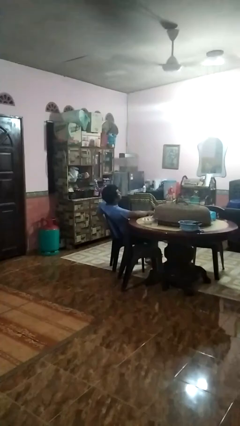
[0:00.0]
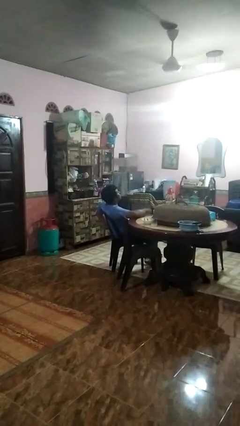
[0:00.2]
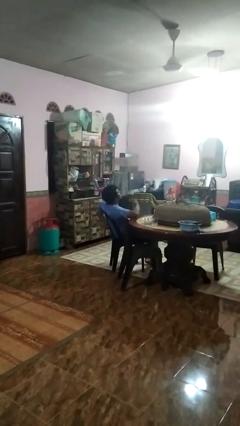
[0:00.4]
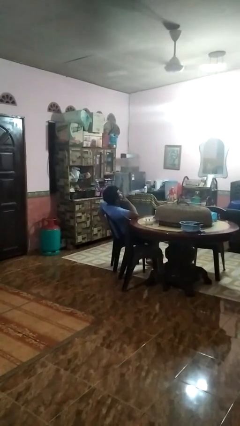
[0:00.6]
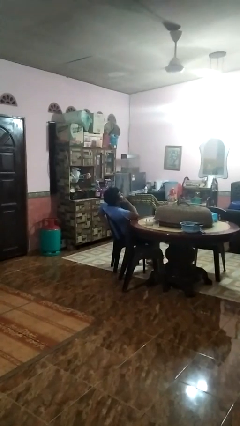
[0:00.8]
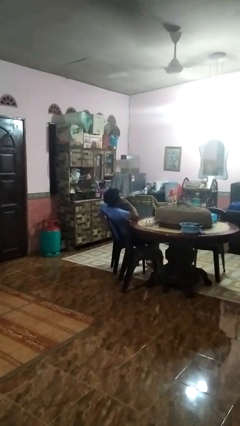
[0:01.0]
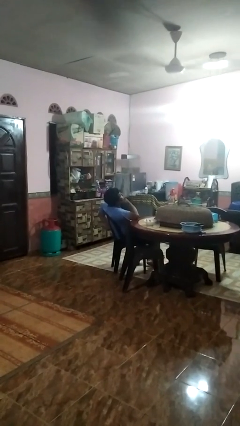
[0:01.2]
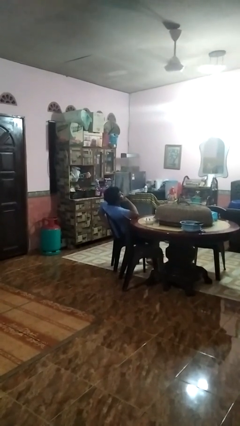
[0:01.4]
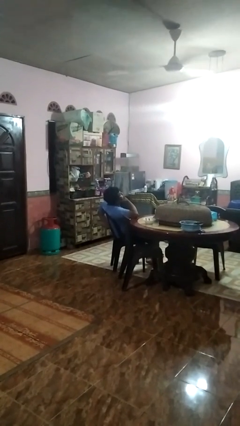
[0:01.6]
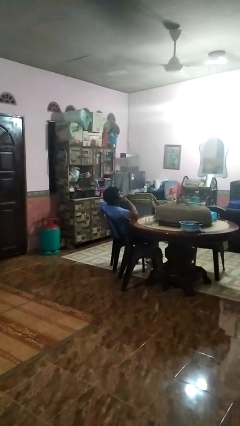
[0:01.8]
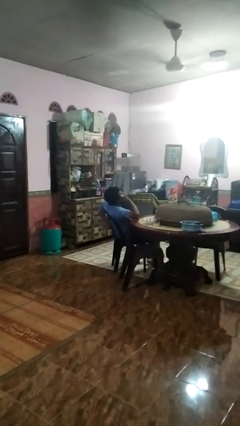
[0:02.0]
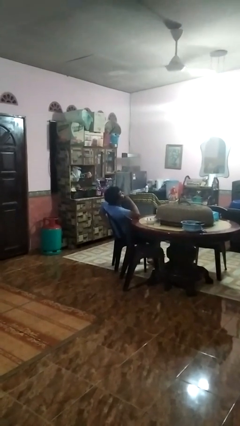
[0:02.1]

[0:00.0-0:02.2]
person strokes chin

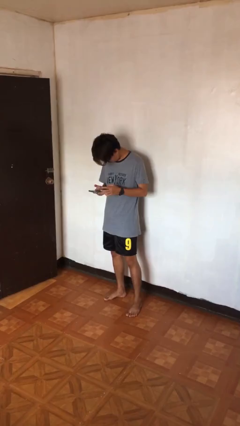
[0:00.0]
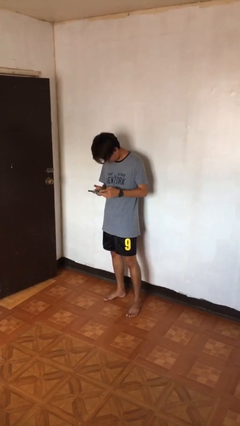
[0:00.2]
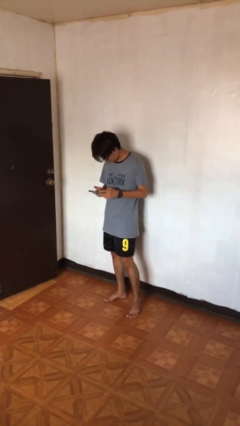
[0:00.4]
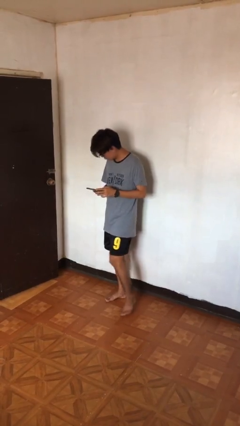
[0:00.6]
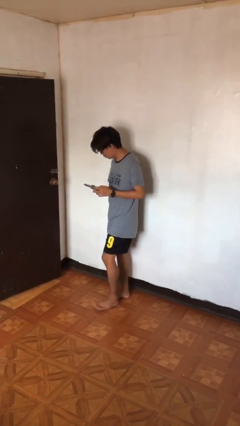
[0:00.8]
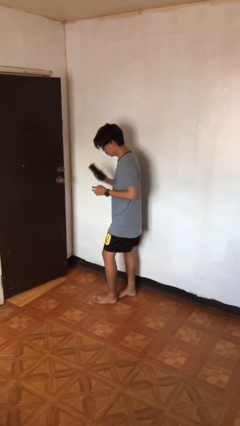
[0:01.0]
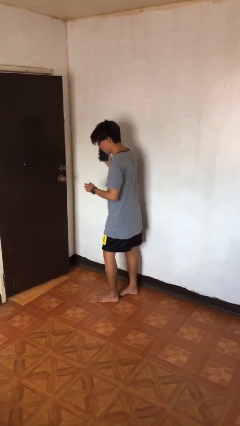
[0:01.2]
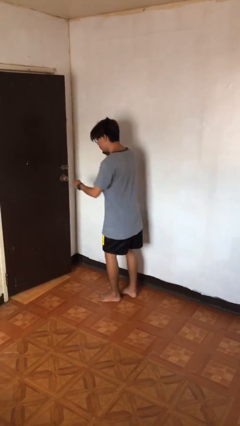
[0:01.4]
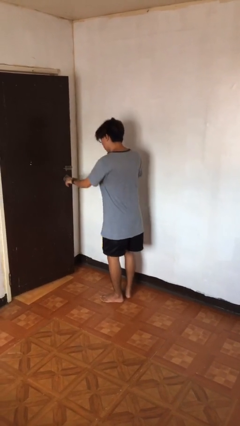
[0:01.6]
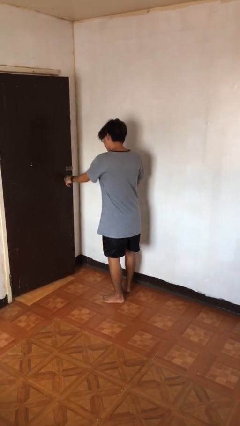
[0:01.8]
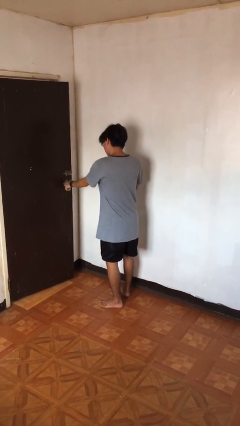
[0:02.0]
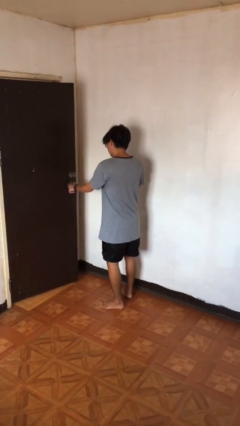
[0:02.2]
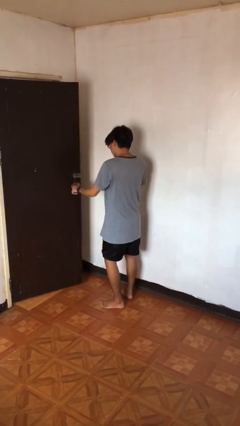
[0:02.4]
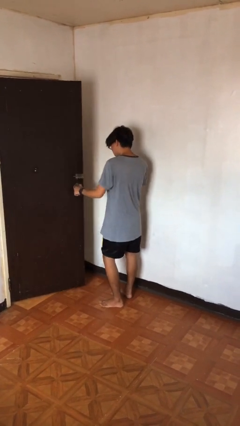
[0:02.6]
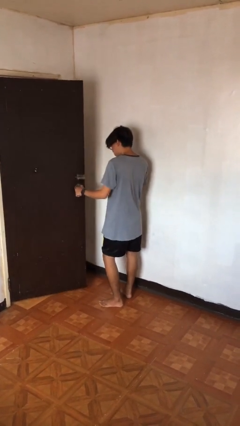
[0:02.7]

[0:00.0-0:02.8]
person opens facility door

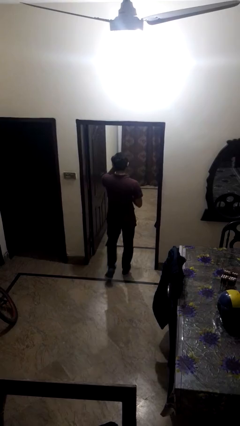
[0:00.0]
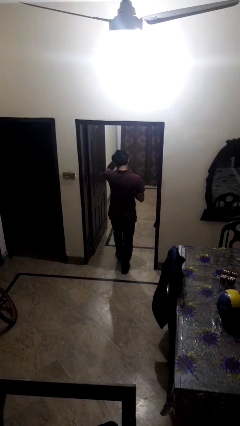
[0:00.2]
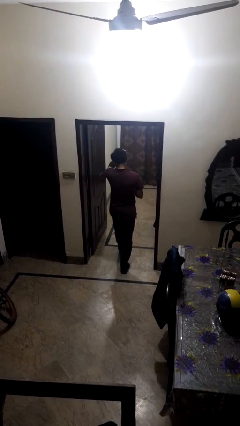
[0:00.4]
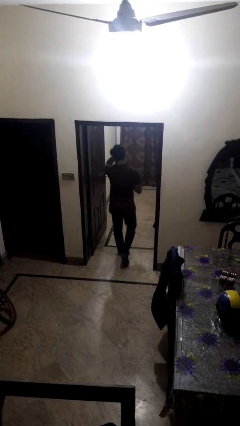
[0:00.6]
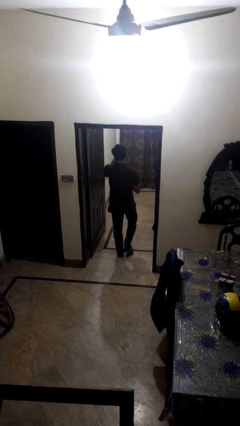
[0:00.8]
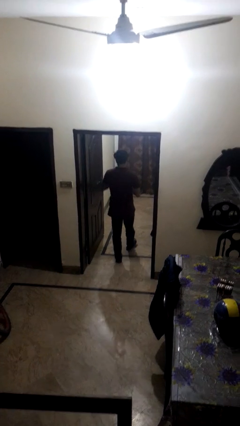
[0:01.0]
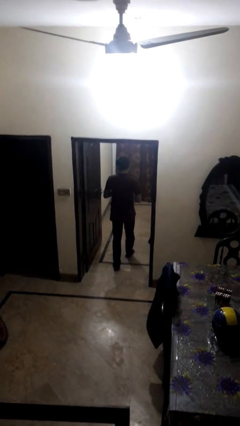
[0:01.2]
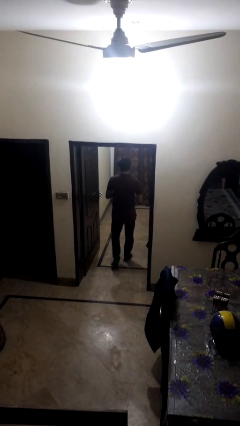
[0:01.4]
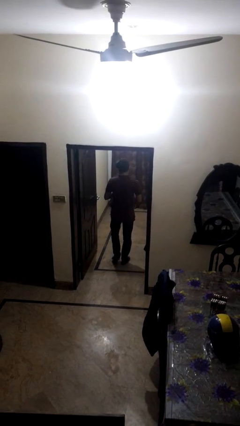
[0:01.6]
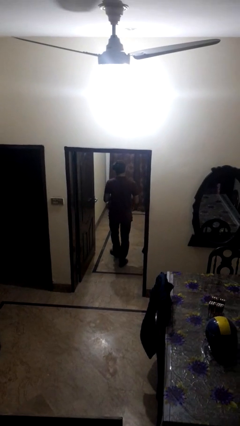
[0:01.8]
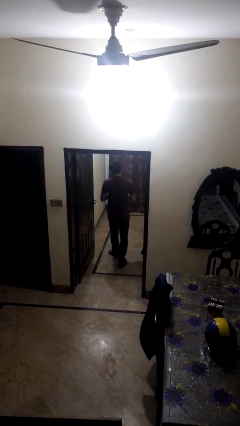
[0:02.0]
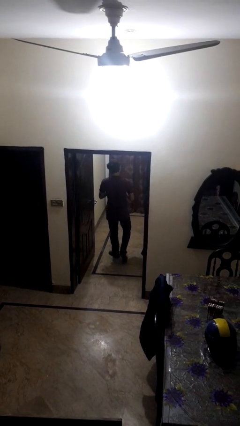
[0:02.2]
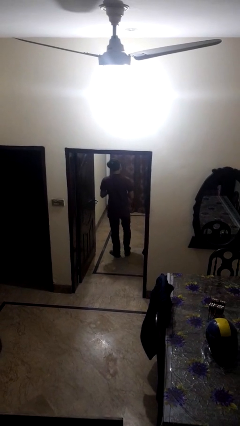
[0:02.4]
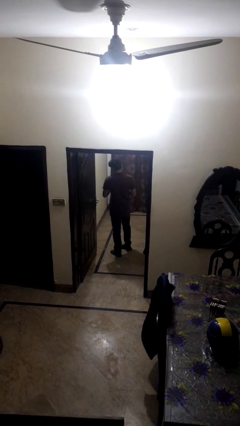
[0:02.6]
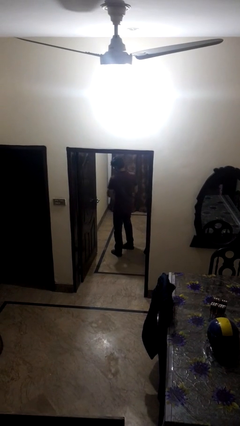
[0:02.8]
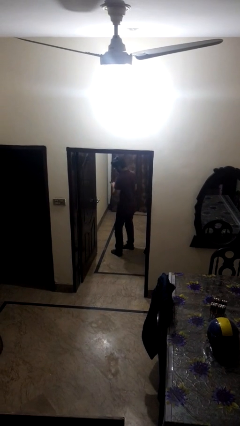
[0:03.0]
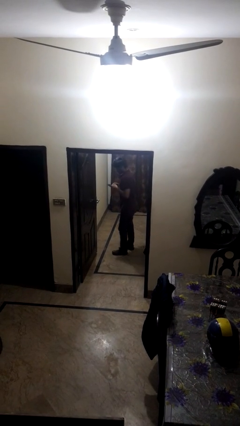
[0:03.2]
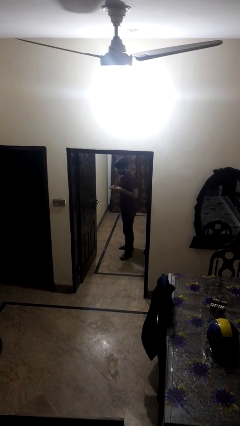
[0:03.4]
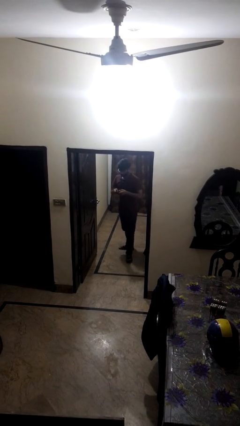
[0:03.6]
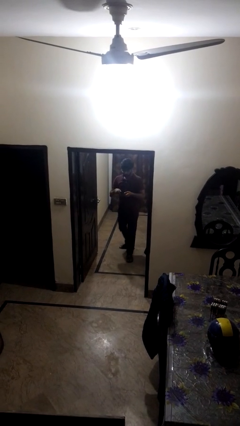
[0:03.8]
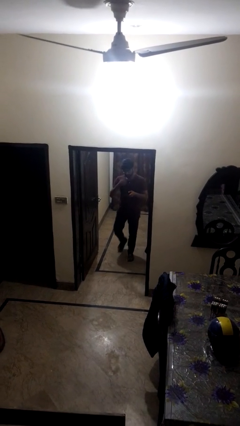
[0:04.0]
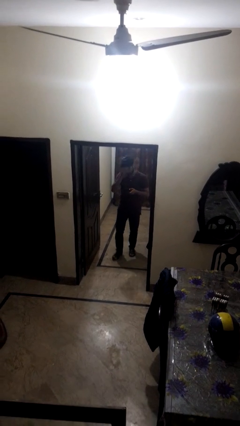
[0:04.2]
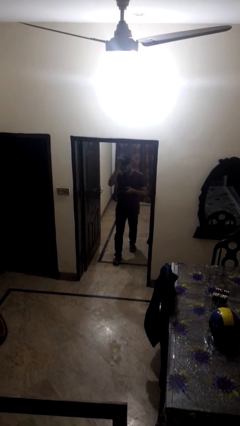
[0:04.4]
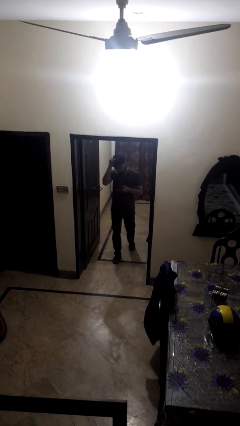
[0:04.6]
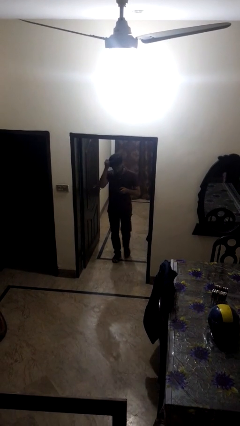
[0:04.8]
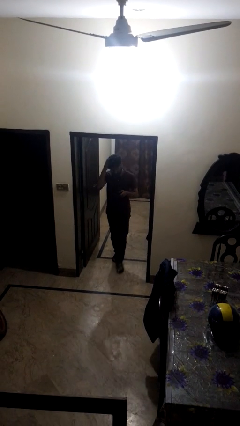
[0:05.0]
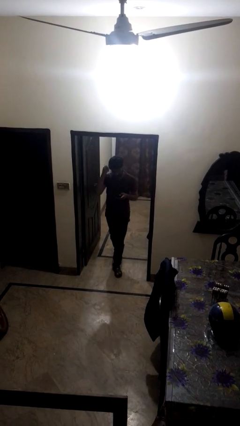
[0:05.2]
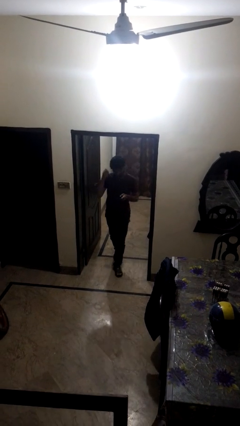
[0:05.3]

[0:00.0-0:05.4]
person exits scene through structure

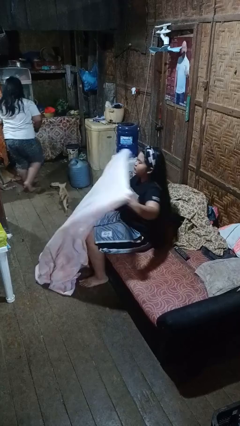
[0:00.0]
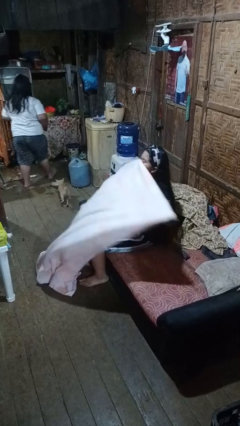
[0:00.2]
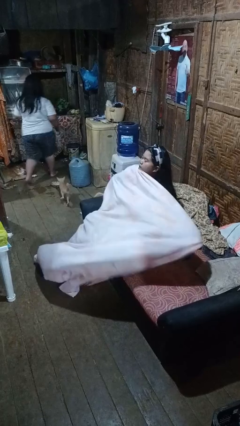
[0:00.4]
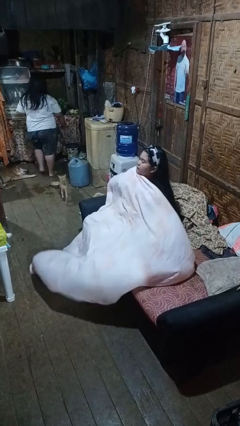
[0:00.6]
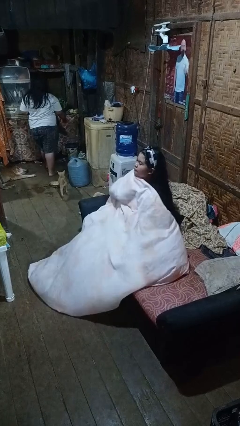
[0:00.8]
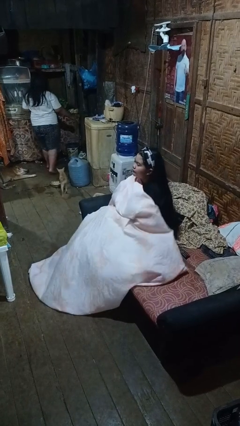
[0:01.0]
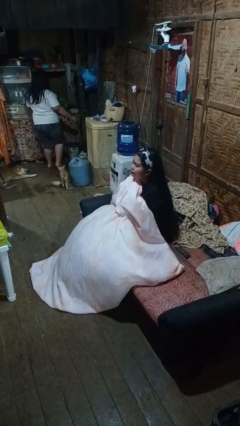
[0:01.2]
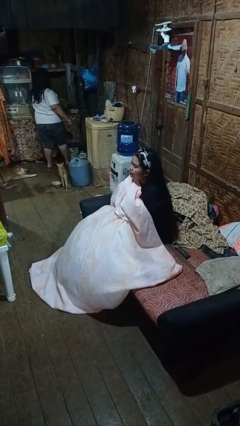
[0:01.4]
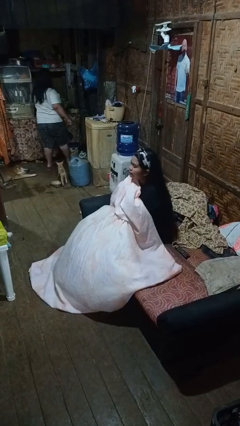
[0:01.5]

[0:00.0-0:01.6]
person covers with blanket

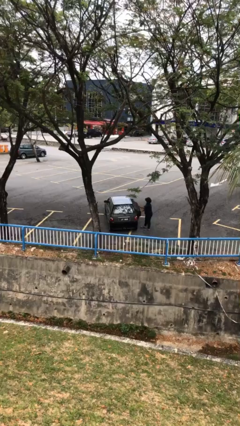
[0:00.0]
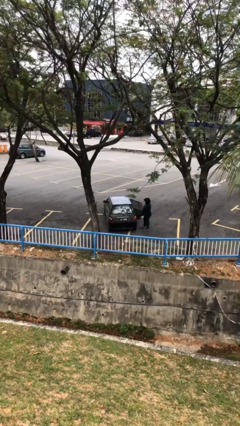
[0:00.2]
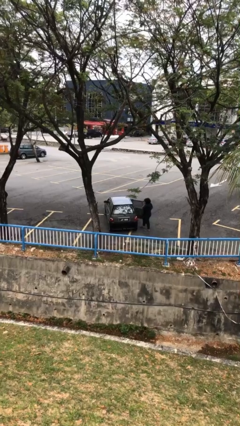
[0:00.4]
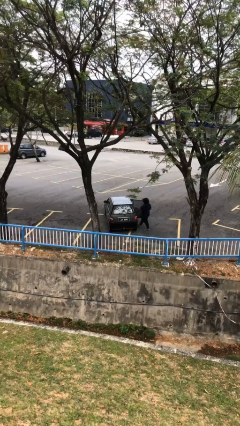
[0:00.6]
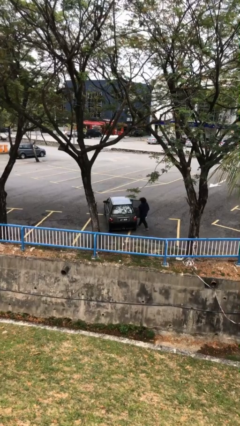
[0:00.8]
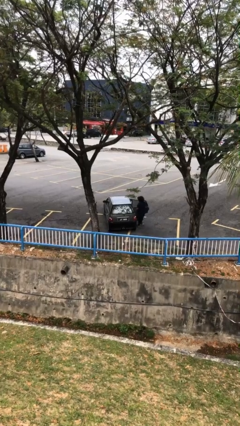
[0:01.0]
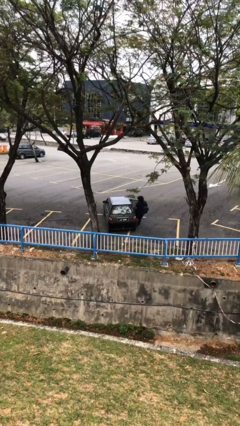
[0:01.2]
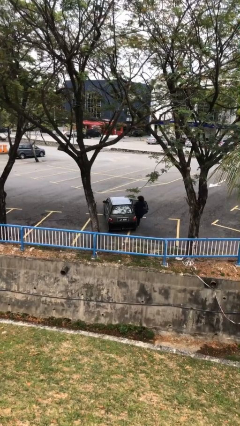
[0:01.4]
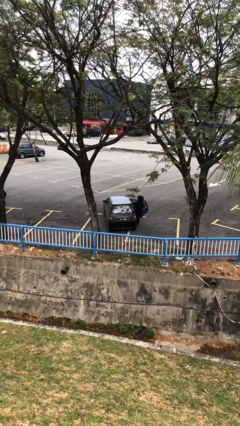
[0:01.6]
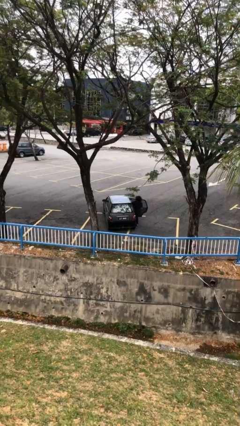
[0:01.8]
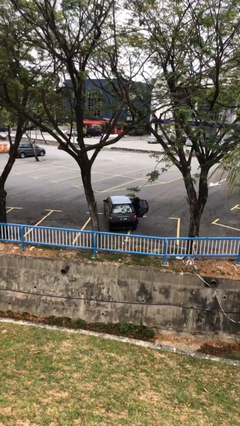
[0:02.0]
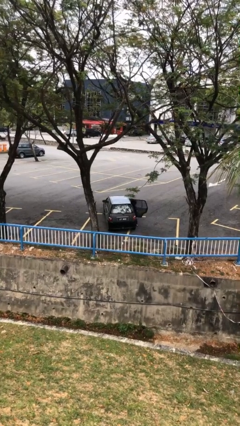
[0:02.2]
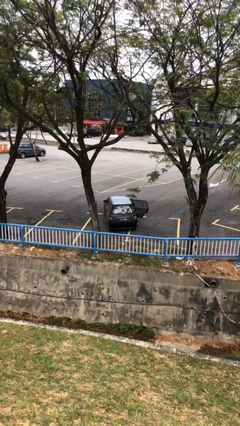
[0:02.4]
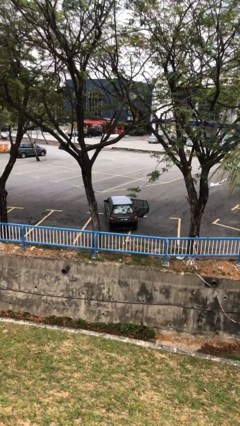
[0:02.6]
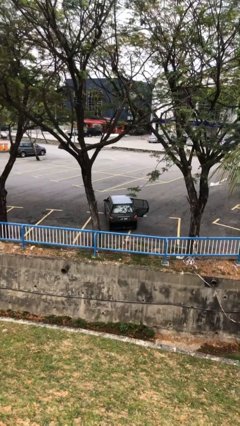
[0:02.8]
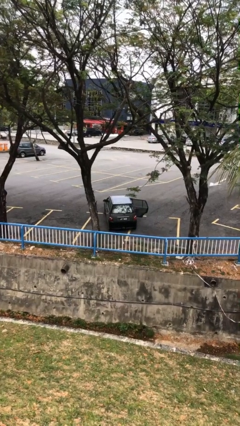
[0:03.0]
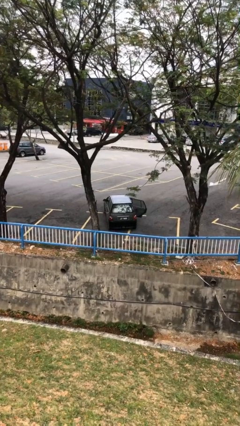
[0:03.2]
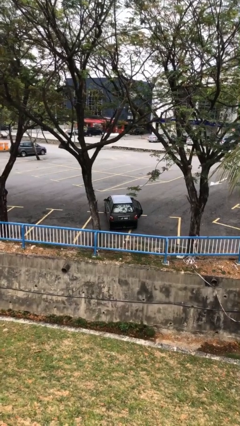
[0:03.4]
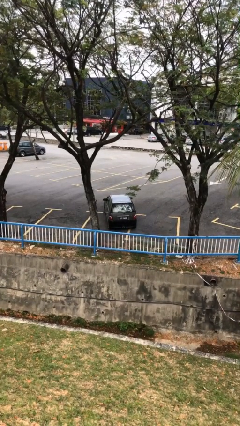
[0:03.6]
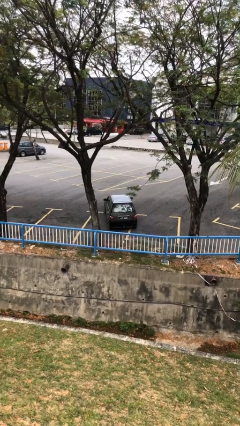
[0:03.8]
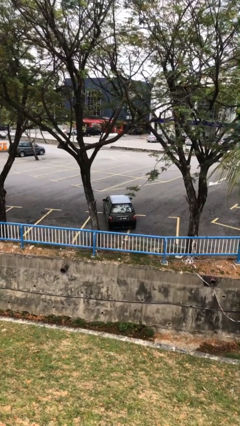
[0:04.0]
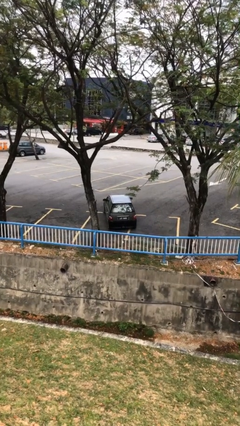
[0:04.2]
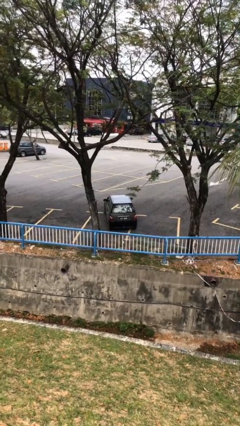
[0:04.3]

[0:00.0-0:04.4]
car picks up person

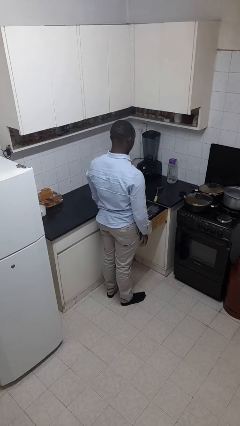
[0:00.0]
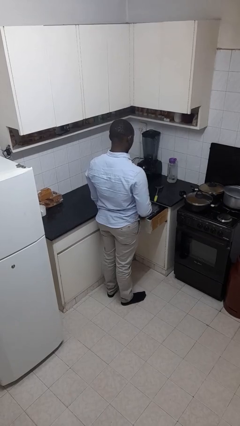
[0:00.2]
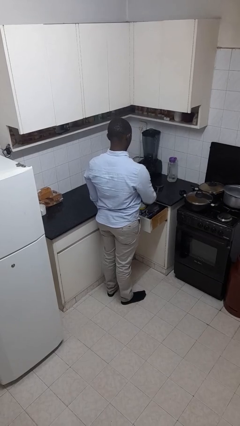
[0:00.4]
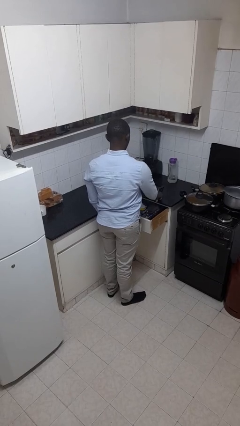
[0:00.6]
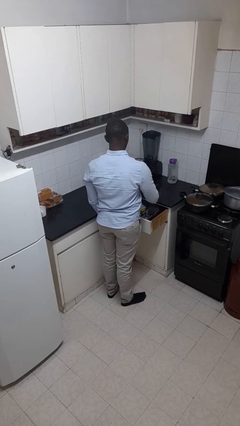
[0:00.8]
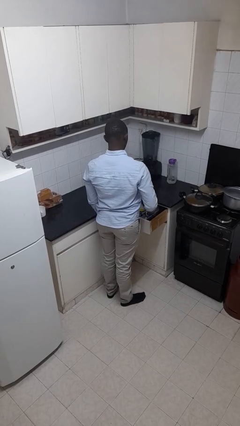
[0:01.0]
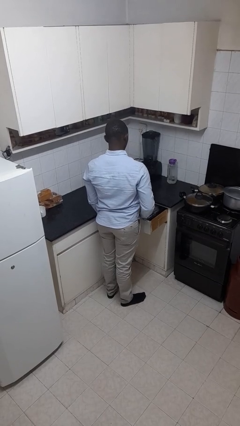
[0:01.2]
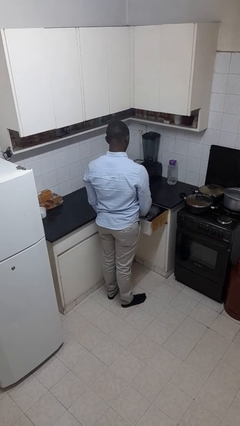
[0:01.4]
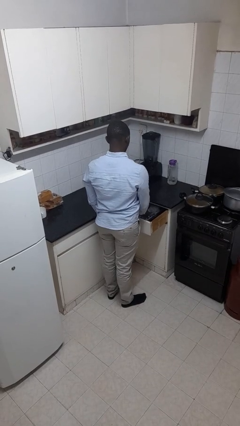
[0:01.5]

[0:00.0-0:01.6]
person puts object into kitchen drawer
